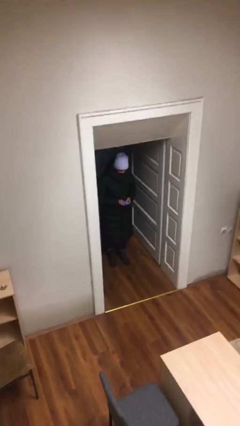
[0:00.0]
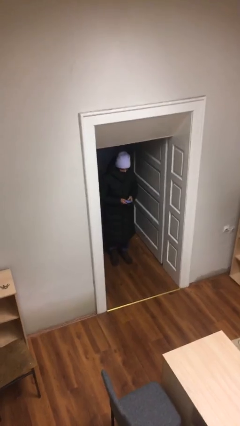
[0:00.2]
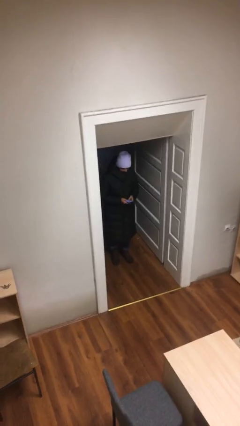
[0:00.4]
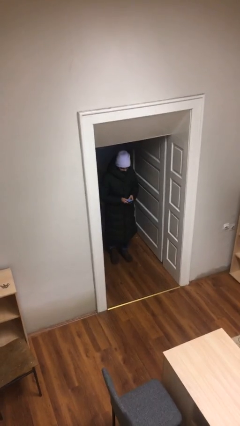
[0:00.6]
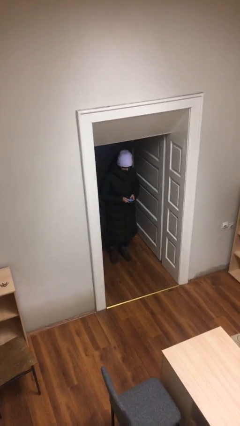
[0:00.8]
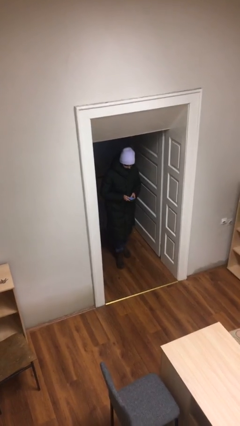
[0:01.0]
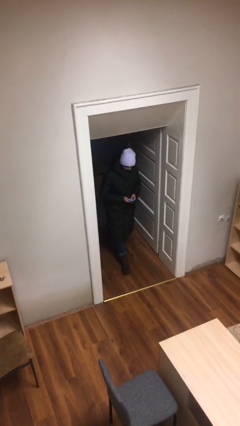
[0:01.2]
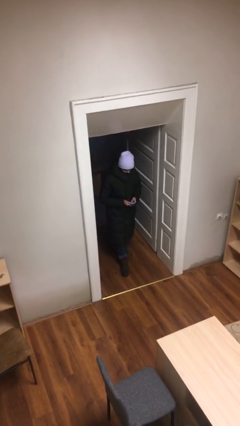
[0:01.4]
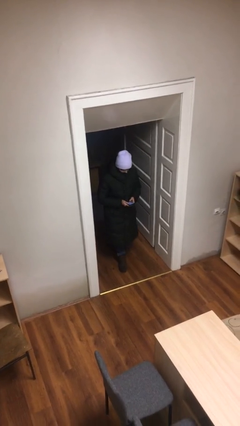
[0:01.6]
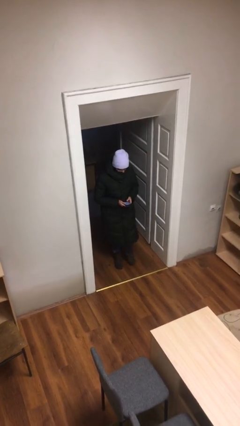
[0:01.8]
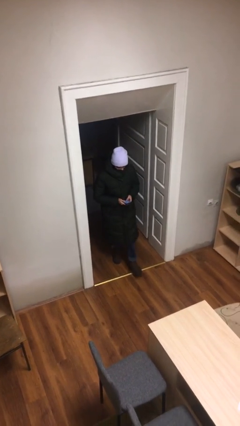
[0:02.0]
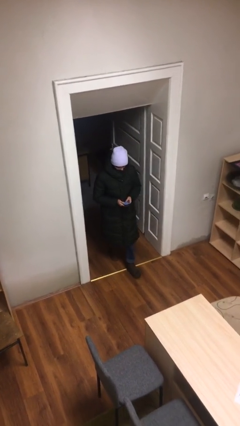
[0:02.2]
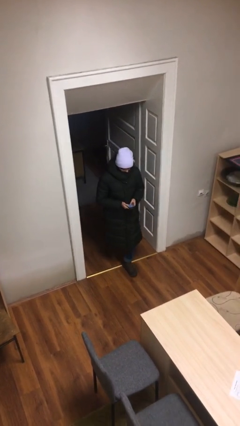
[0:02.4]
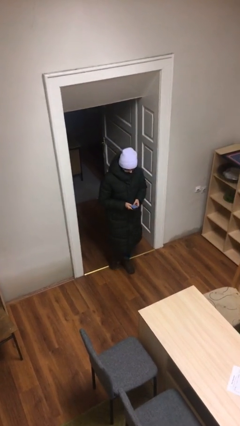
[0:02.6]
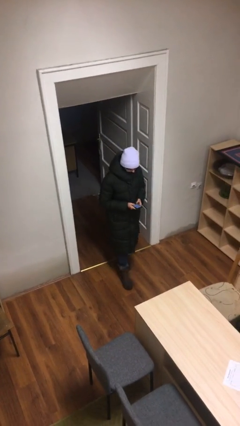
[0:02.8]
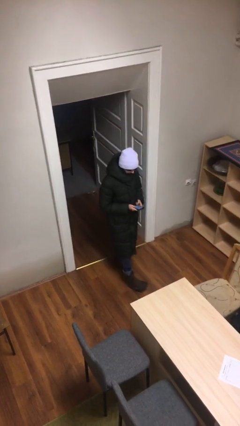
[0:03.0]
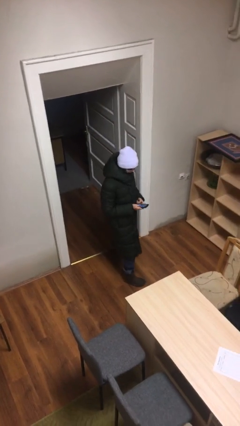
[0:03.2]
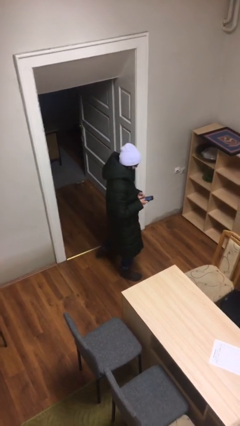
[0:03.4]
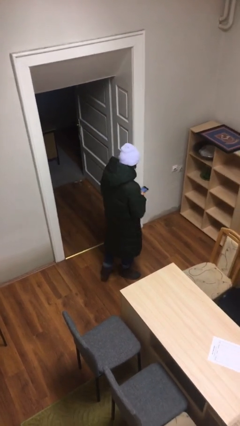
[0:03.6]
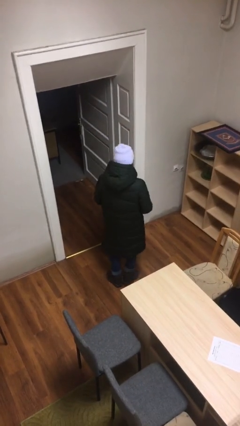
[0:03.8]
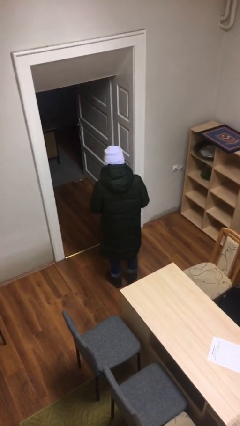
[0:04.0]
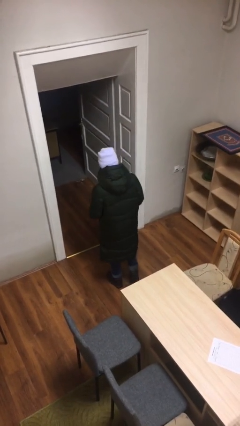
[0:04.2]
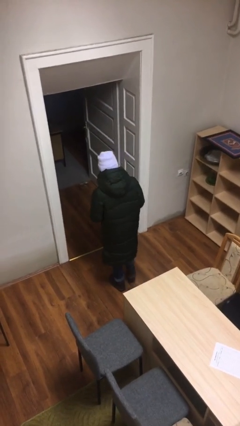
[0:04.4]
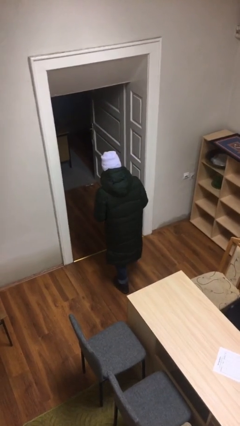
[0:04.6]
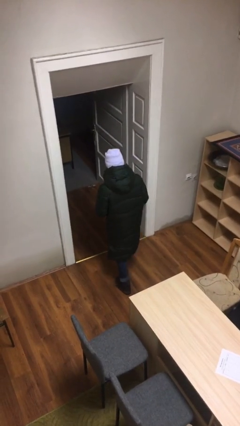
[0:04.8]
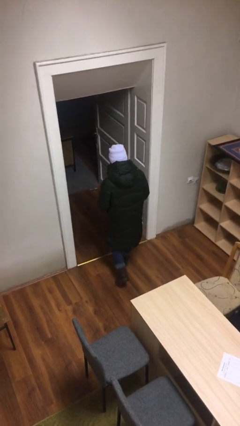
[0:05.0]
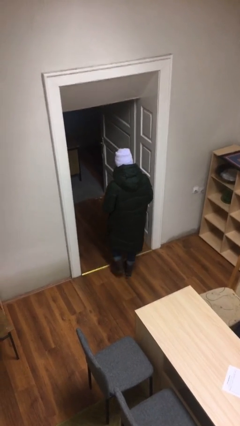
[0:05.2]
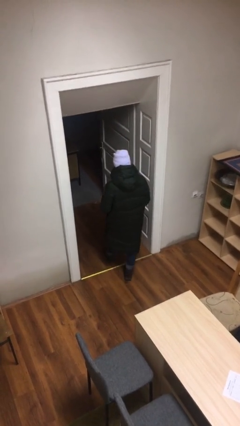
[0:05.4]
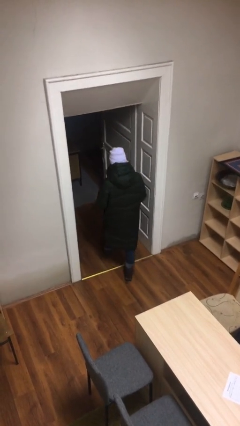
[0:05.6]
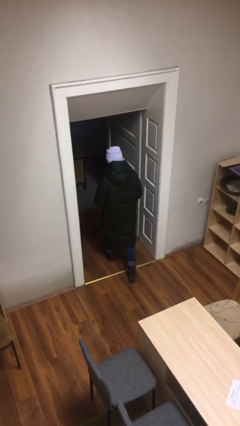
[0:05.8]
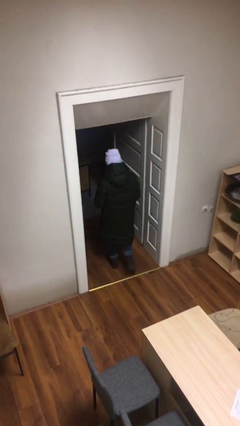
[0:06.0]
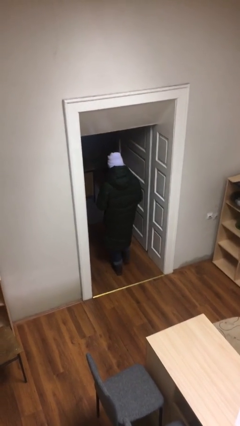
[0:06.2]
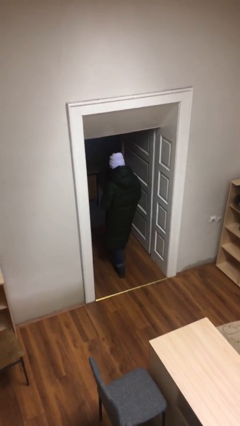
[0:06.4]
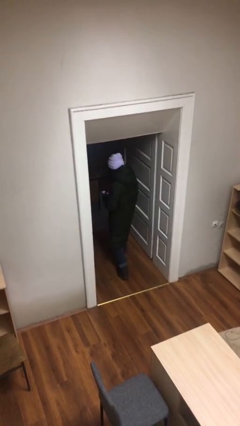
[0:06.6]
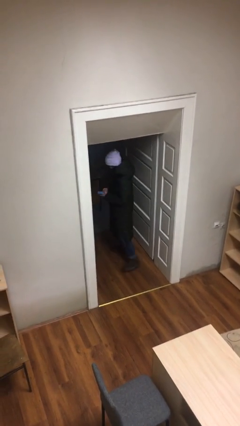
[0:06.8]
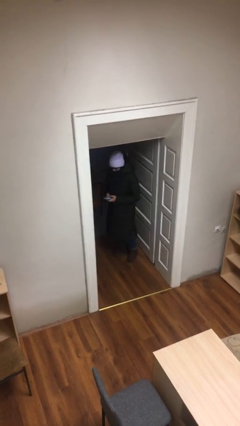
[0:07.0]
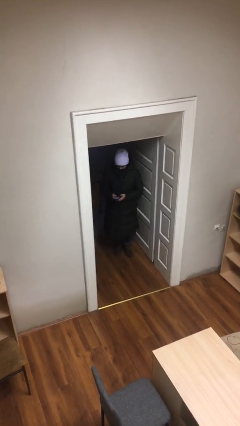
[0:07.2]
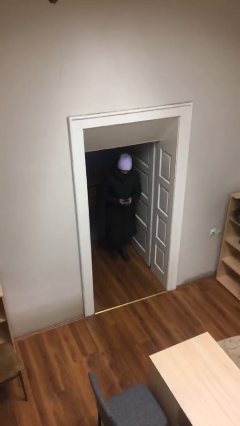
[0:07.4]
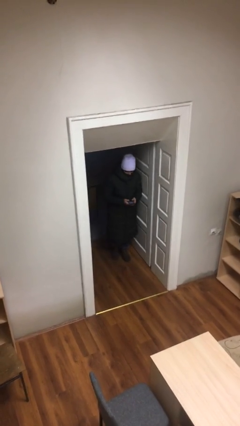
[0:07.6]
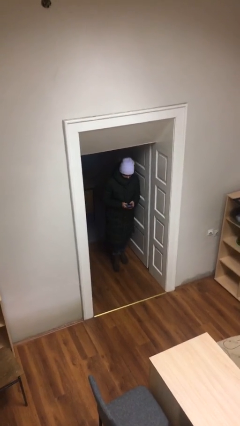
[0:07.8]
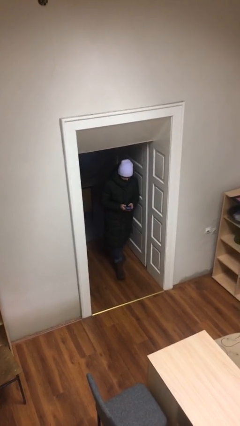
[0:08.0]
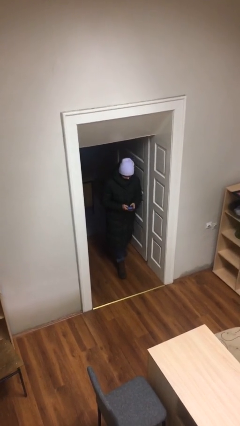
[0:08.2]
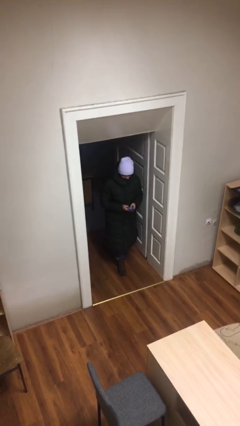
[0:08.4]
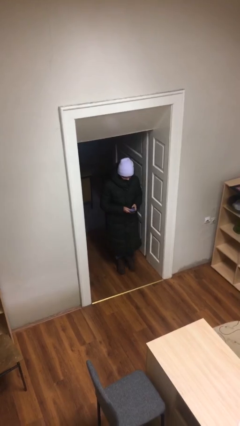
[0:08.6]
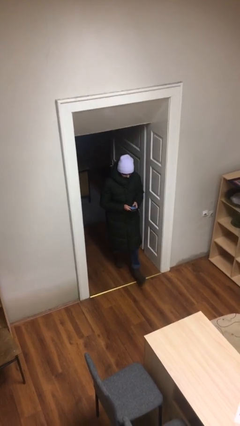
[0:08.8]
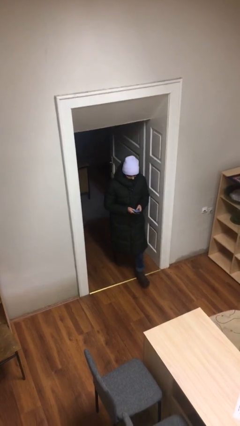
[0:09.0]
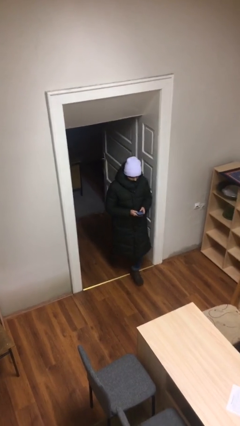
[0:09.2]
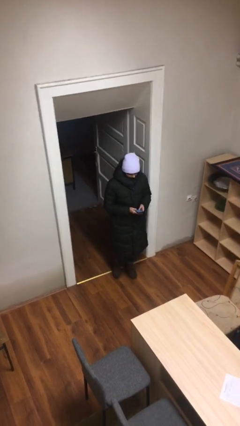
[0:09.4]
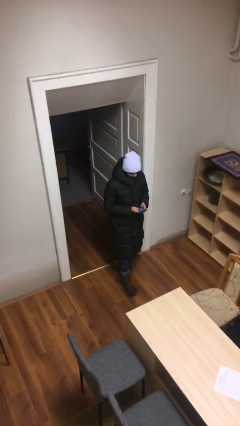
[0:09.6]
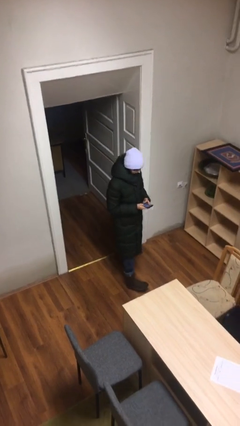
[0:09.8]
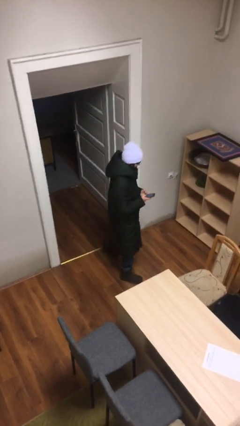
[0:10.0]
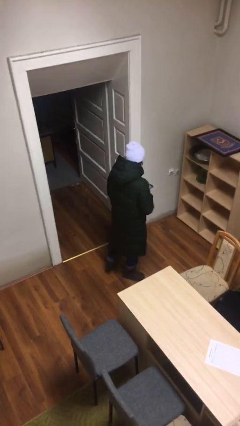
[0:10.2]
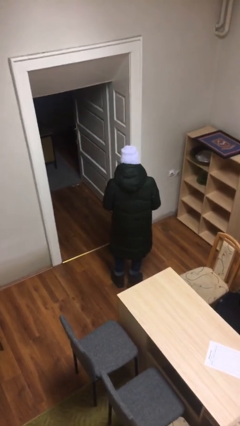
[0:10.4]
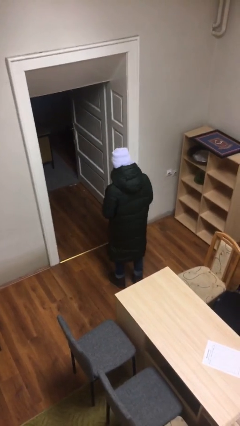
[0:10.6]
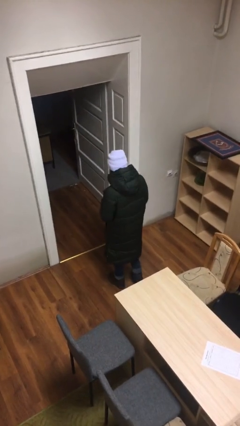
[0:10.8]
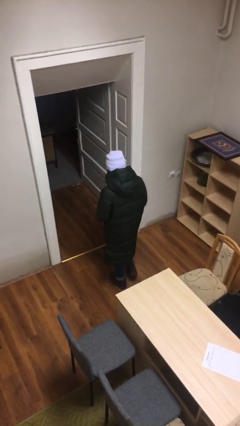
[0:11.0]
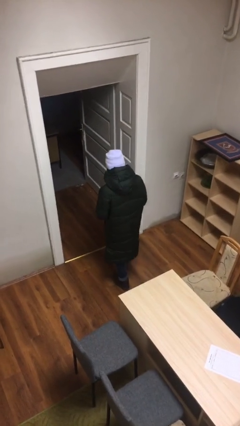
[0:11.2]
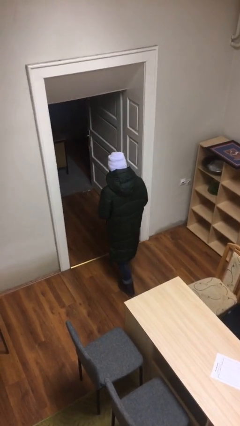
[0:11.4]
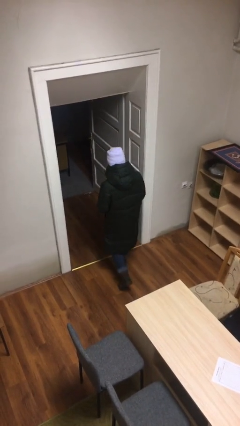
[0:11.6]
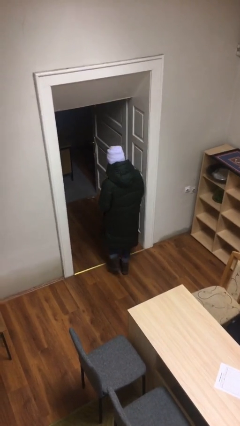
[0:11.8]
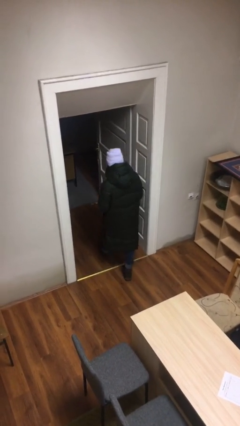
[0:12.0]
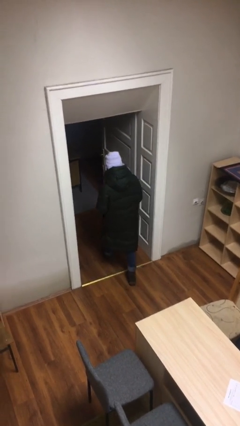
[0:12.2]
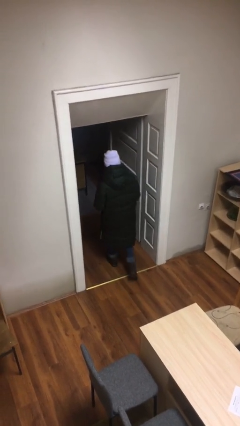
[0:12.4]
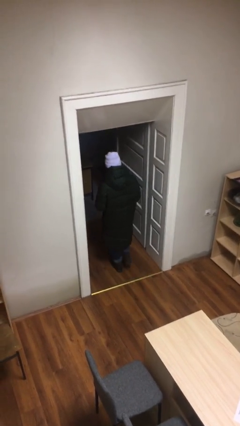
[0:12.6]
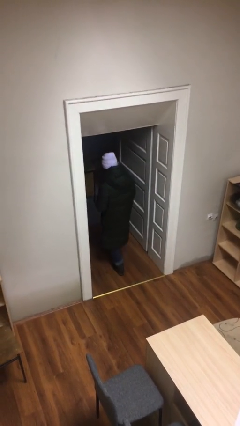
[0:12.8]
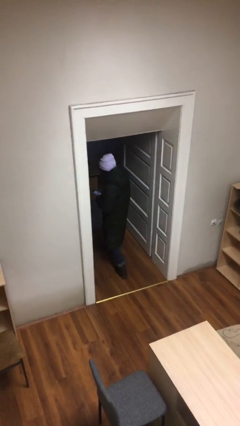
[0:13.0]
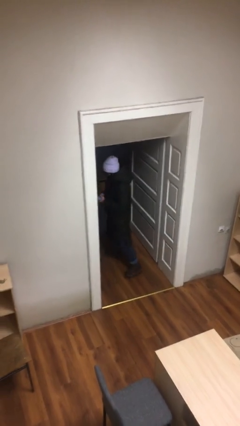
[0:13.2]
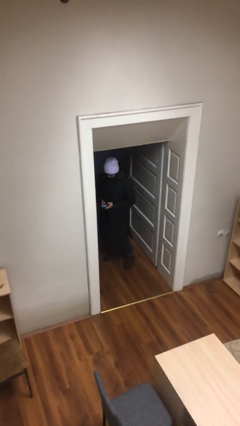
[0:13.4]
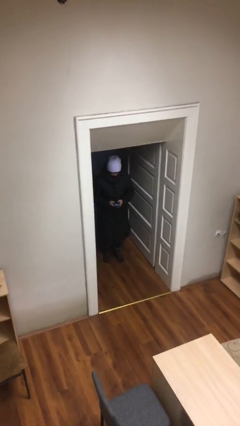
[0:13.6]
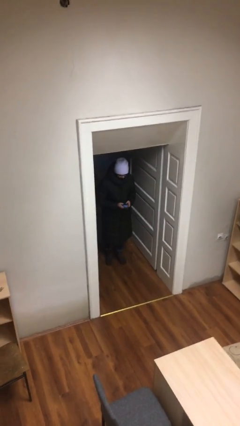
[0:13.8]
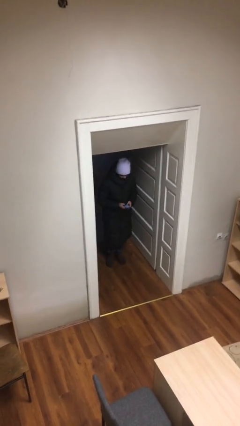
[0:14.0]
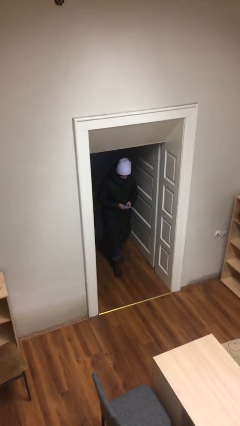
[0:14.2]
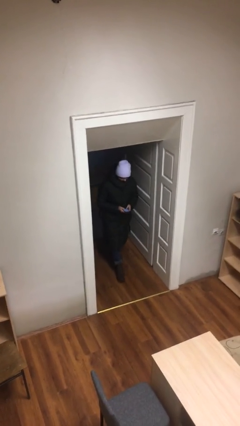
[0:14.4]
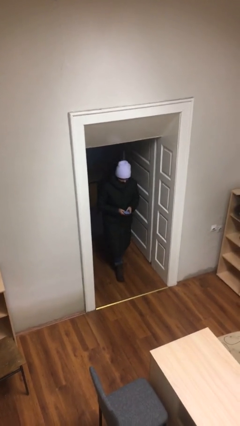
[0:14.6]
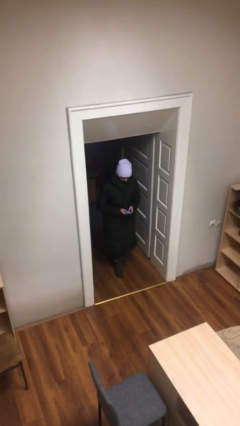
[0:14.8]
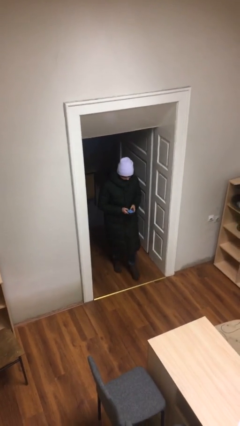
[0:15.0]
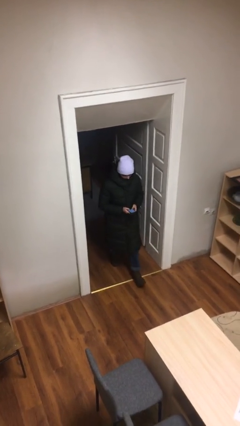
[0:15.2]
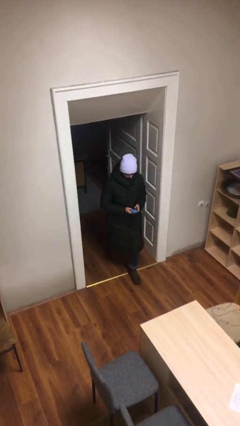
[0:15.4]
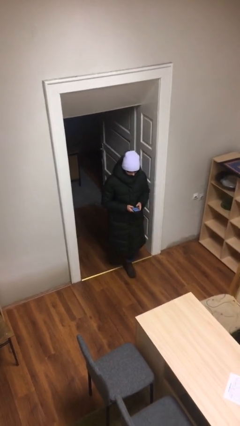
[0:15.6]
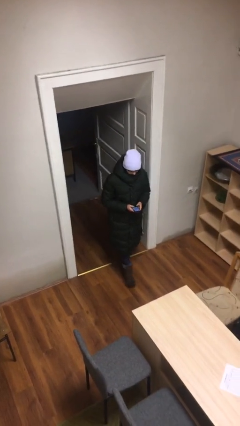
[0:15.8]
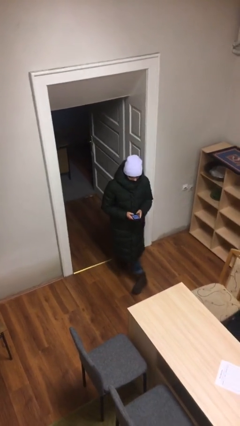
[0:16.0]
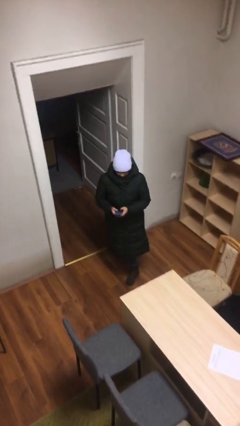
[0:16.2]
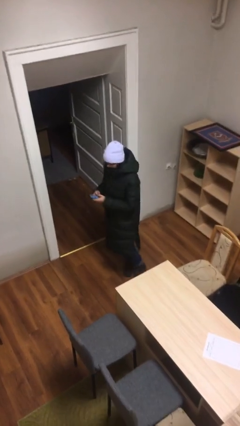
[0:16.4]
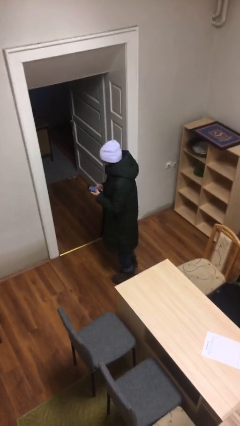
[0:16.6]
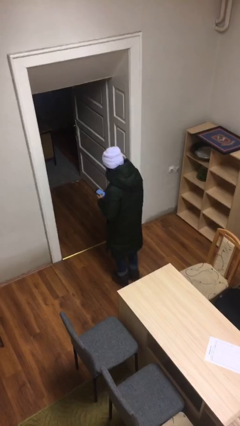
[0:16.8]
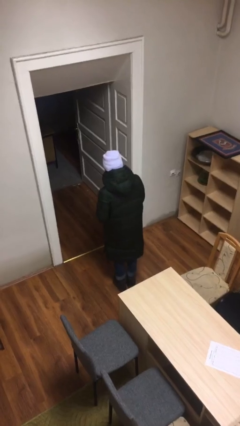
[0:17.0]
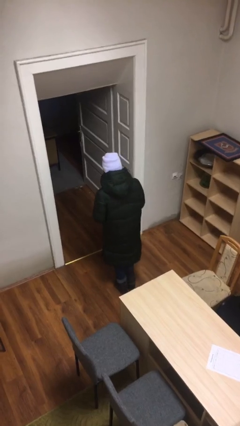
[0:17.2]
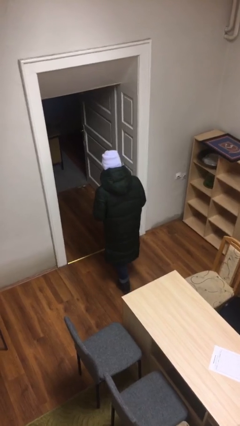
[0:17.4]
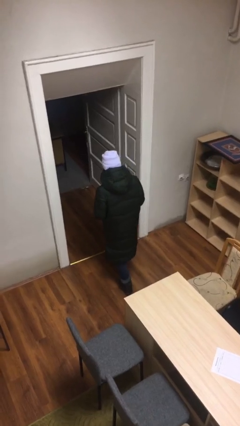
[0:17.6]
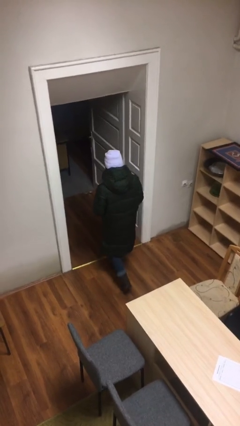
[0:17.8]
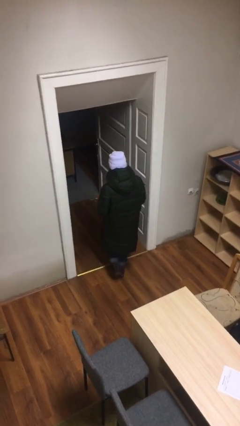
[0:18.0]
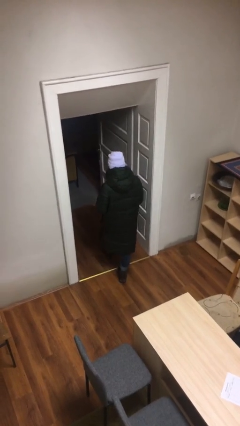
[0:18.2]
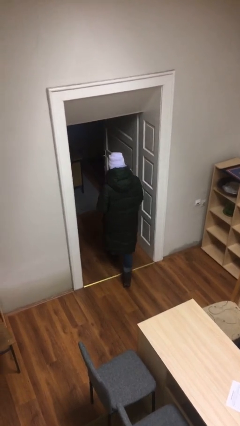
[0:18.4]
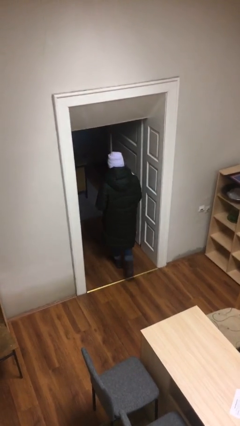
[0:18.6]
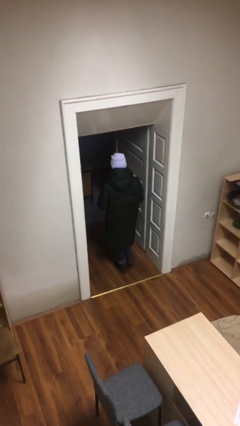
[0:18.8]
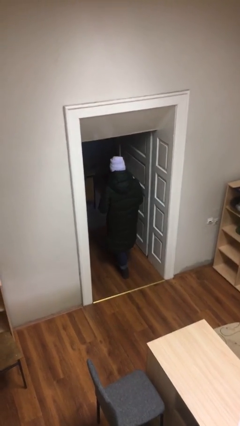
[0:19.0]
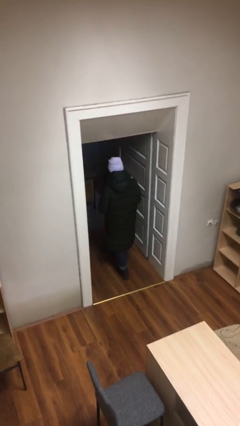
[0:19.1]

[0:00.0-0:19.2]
person texts on phone
